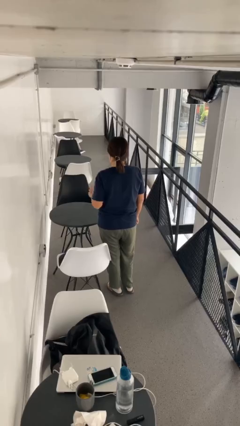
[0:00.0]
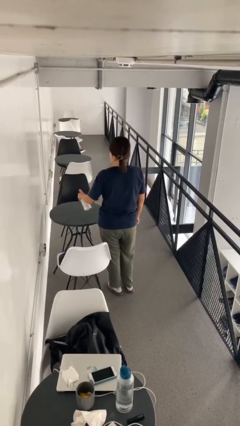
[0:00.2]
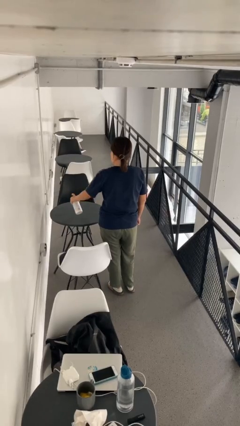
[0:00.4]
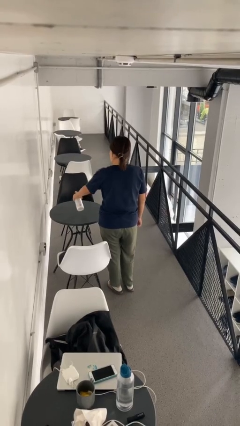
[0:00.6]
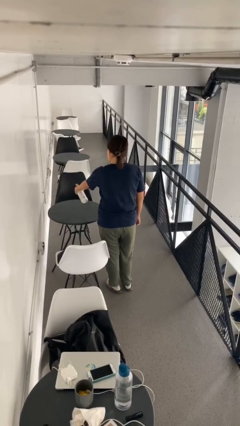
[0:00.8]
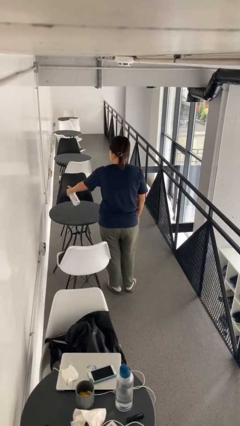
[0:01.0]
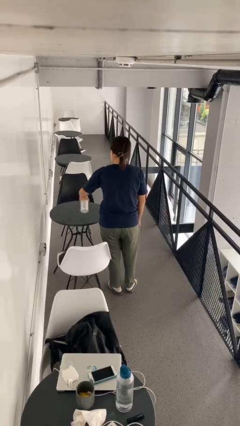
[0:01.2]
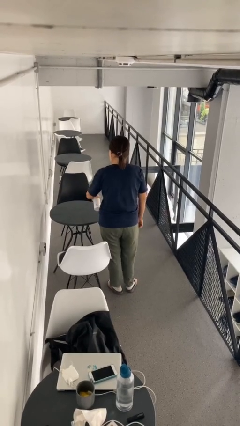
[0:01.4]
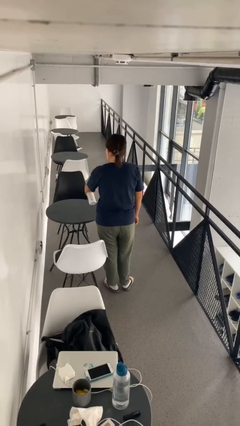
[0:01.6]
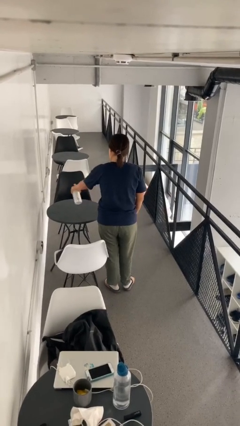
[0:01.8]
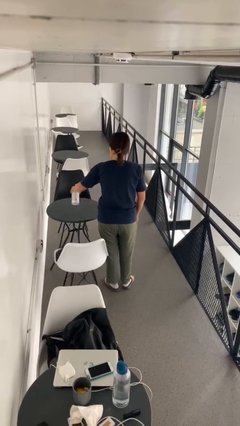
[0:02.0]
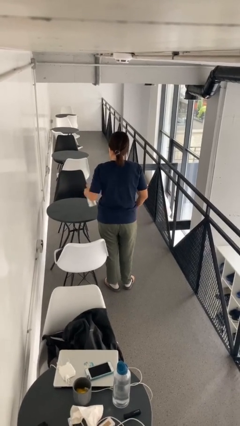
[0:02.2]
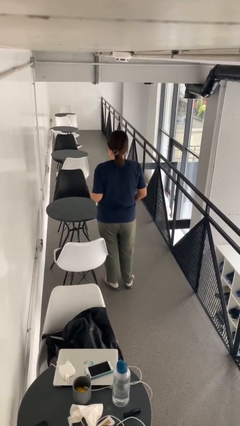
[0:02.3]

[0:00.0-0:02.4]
person sprays from bottle

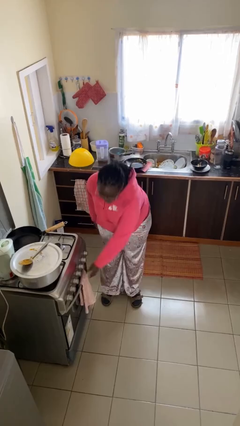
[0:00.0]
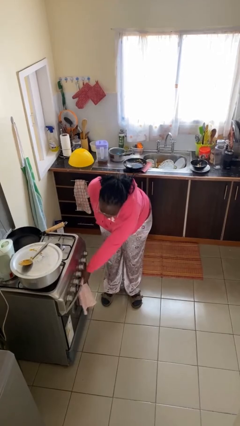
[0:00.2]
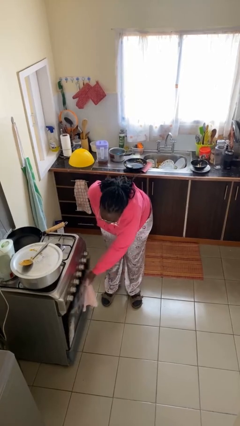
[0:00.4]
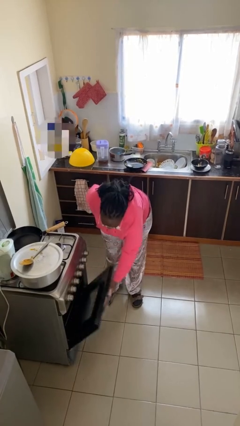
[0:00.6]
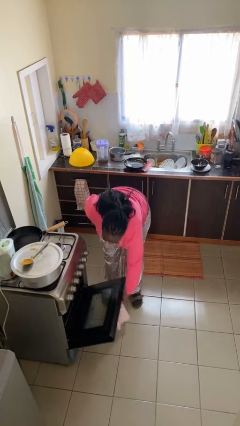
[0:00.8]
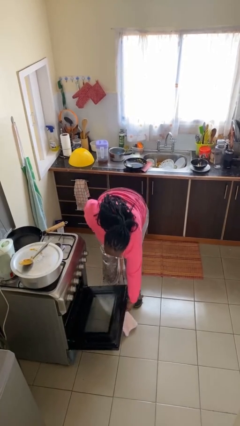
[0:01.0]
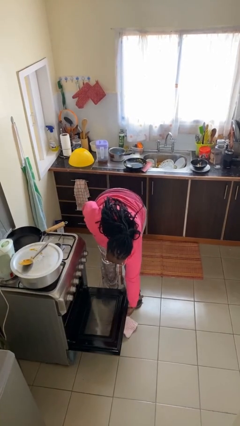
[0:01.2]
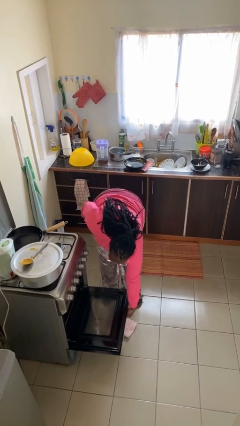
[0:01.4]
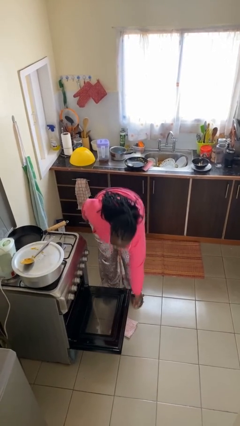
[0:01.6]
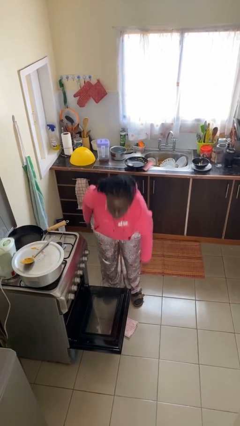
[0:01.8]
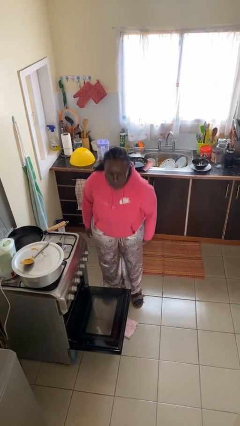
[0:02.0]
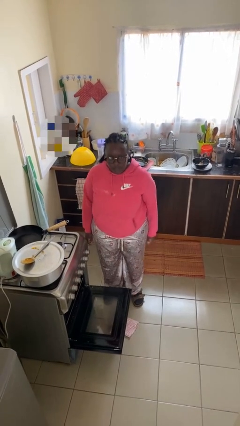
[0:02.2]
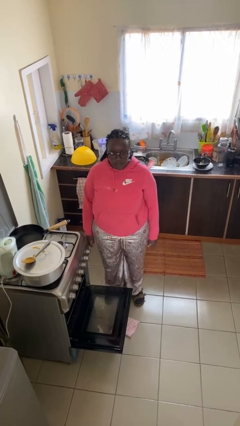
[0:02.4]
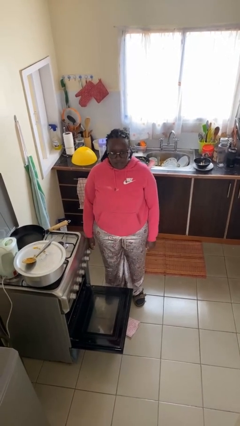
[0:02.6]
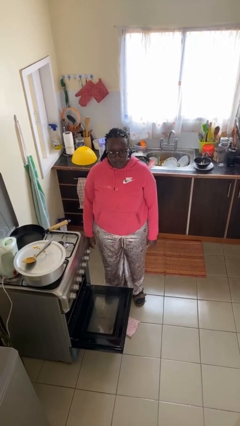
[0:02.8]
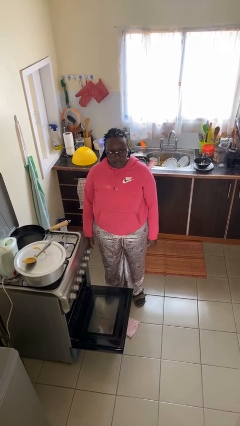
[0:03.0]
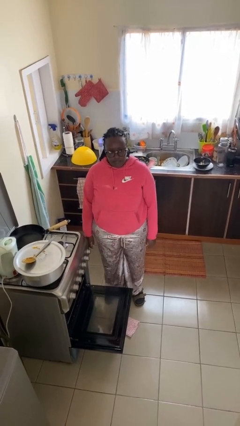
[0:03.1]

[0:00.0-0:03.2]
person opens oven door

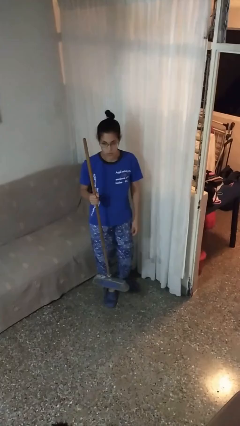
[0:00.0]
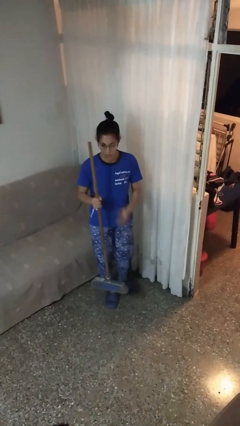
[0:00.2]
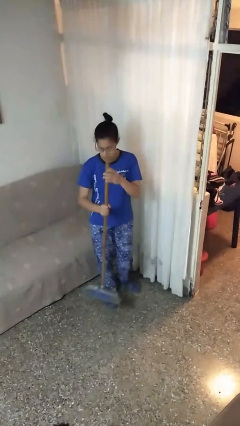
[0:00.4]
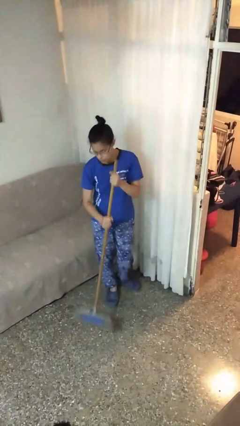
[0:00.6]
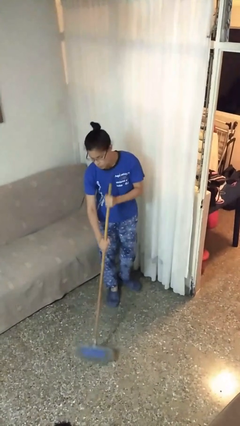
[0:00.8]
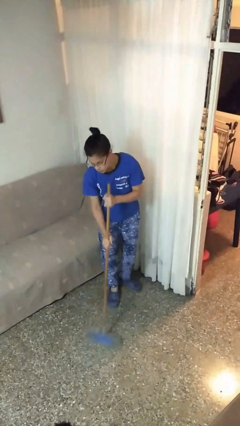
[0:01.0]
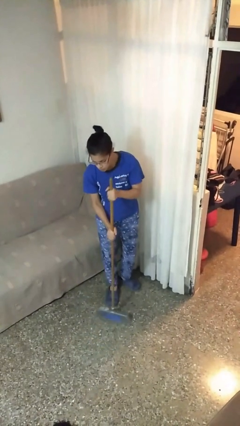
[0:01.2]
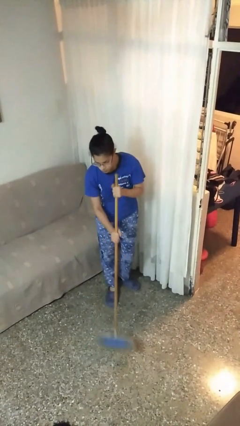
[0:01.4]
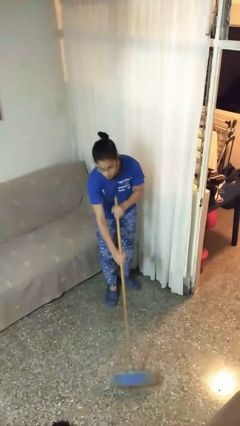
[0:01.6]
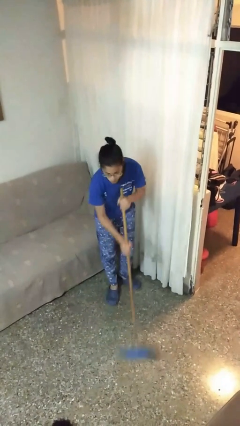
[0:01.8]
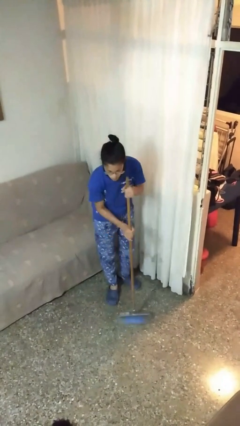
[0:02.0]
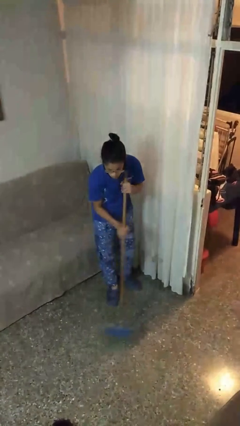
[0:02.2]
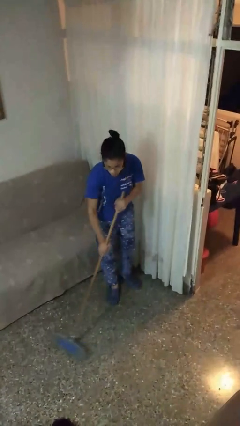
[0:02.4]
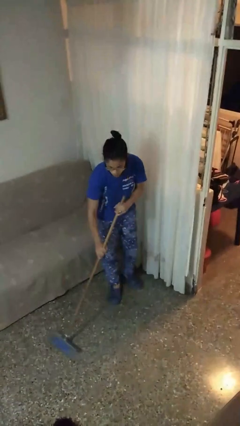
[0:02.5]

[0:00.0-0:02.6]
person sweeps floor

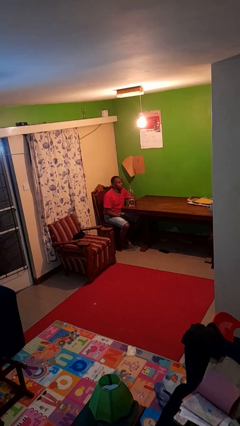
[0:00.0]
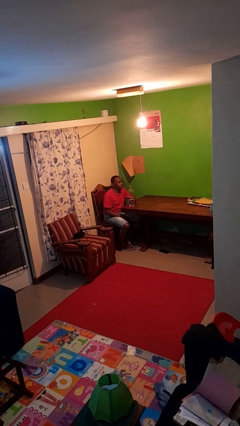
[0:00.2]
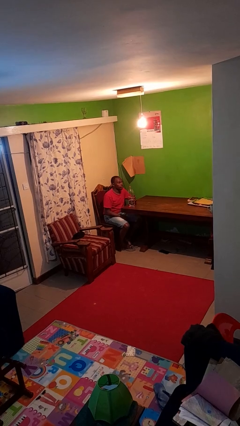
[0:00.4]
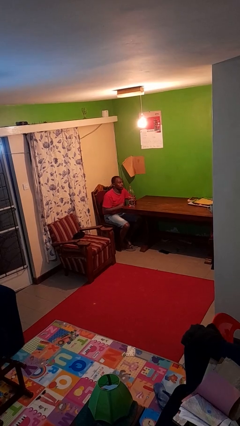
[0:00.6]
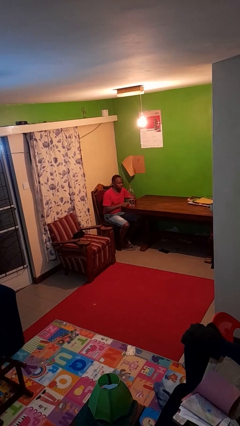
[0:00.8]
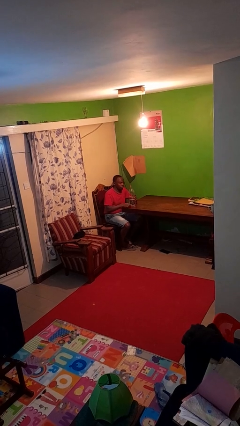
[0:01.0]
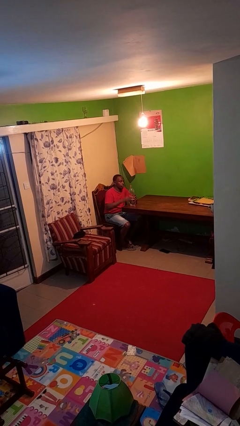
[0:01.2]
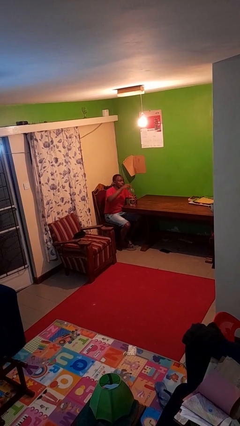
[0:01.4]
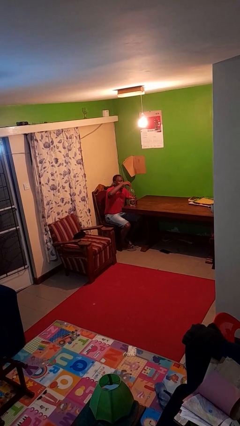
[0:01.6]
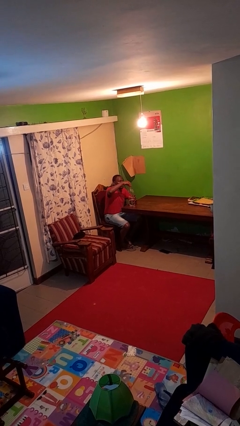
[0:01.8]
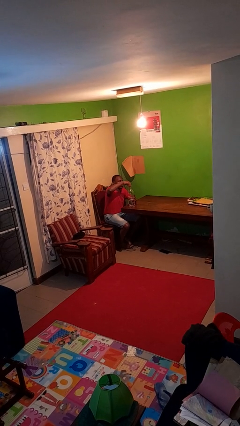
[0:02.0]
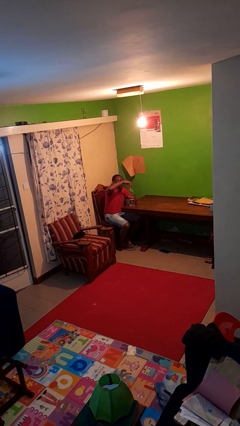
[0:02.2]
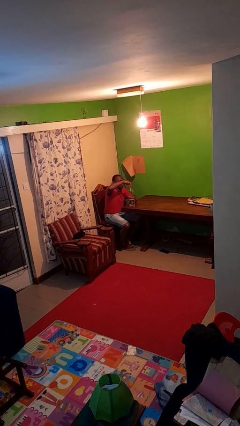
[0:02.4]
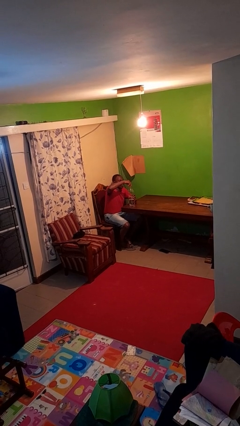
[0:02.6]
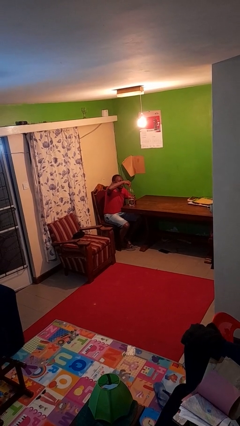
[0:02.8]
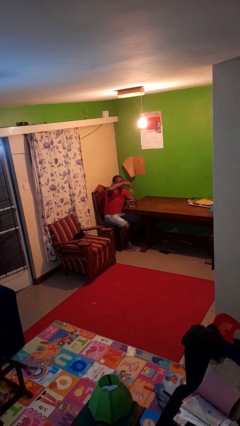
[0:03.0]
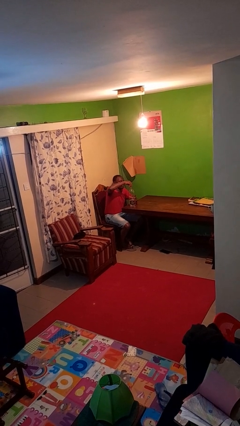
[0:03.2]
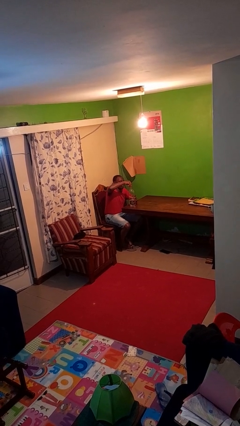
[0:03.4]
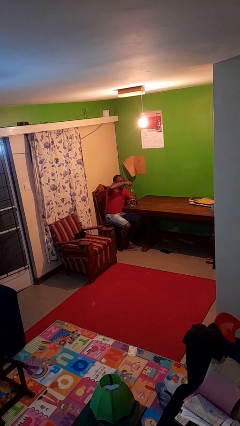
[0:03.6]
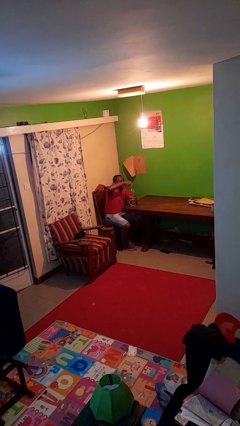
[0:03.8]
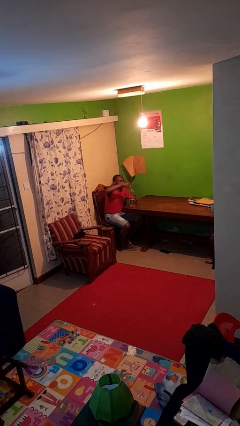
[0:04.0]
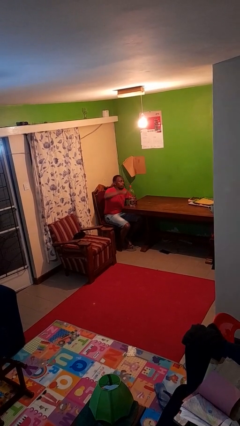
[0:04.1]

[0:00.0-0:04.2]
person screws lid to bottle

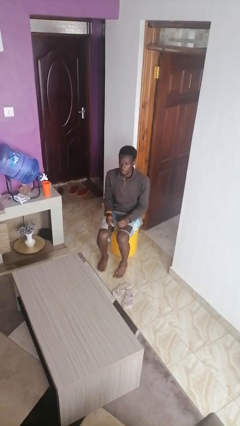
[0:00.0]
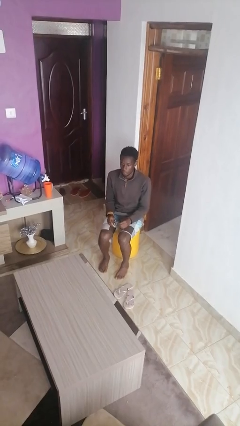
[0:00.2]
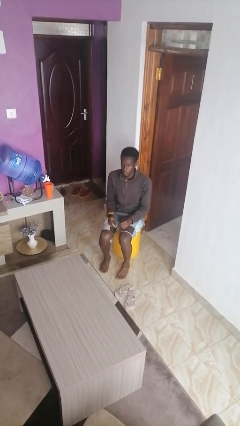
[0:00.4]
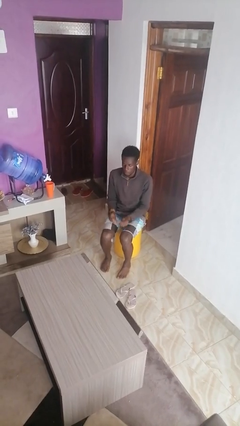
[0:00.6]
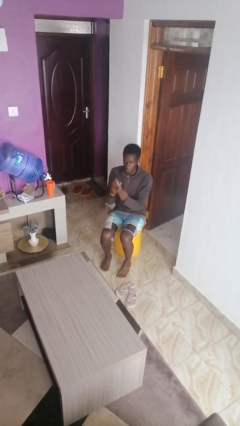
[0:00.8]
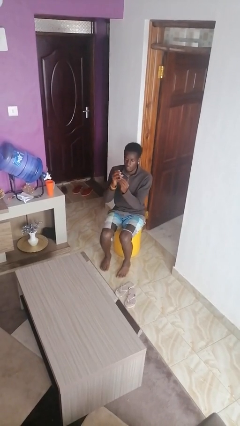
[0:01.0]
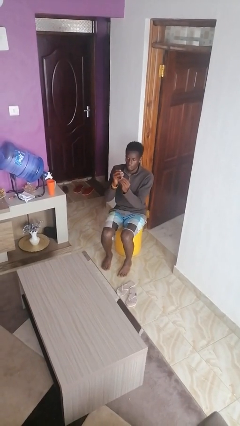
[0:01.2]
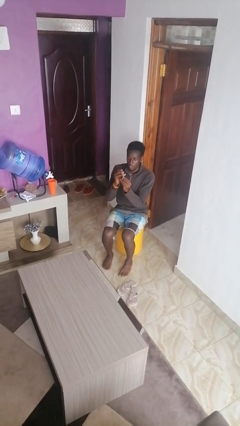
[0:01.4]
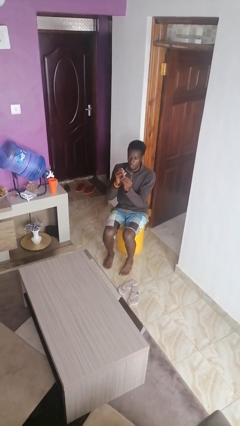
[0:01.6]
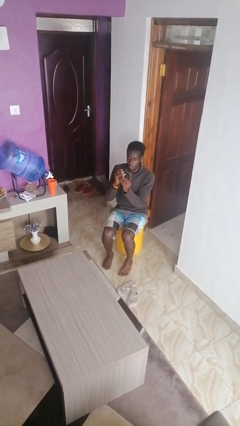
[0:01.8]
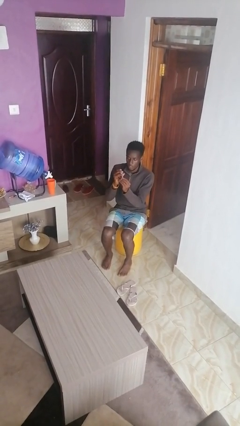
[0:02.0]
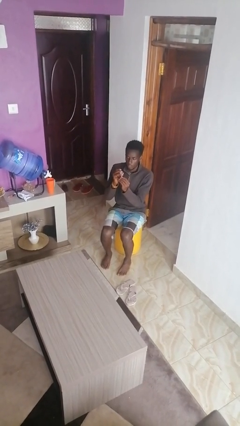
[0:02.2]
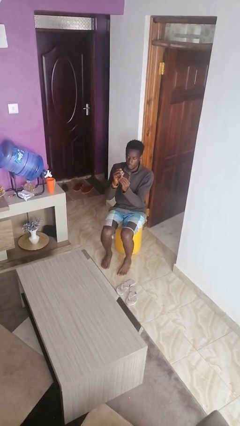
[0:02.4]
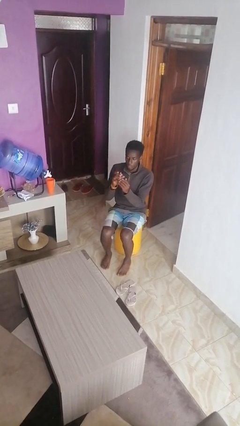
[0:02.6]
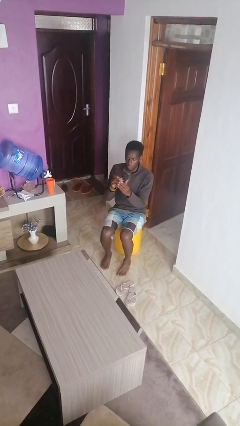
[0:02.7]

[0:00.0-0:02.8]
person clips fingernails

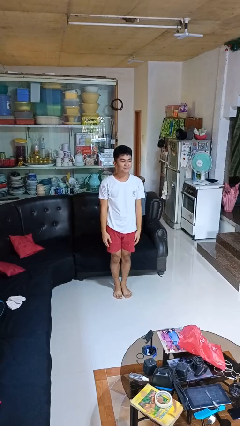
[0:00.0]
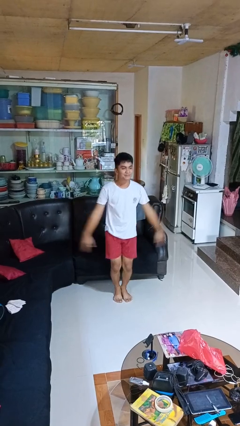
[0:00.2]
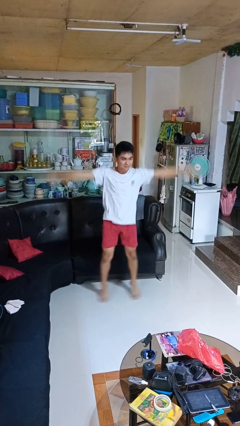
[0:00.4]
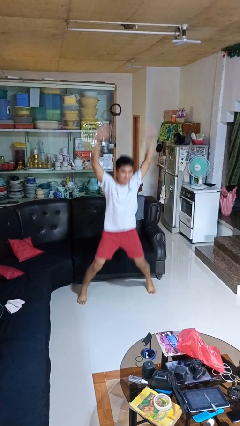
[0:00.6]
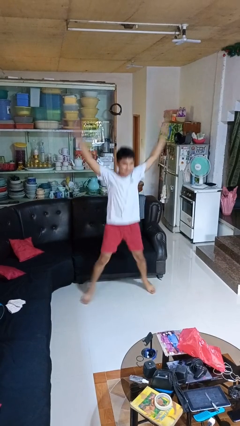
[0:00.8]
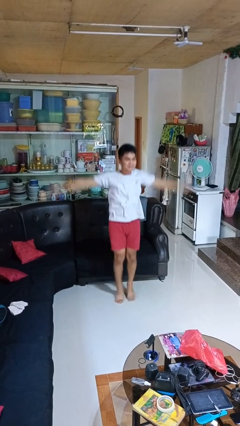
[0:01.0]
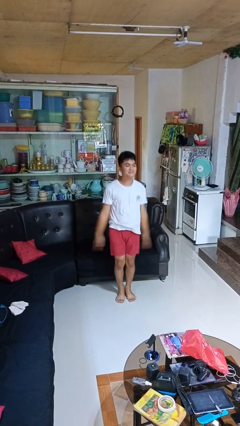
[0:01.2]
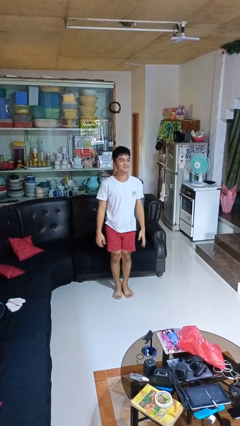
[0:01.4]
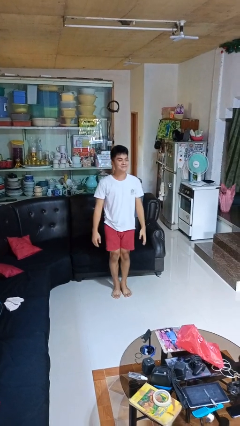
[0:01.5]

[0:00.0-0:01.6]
person exercises with jumping jacks

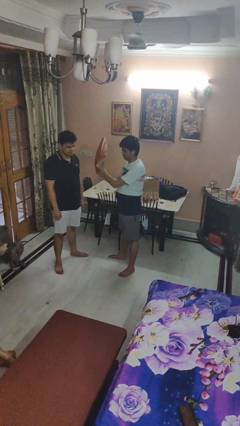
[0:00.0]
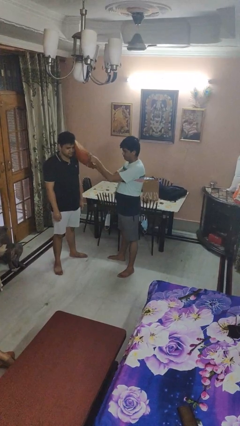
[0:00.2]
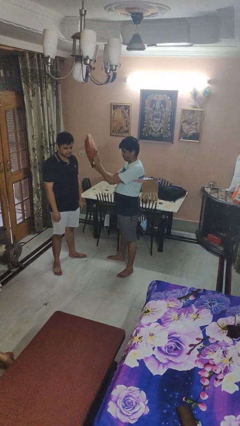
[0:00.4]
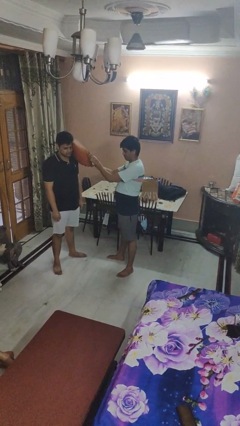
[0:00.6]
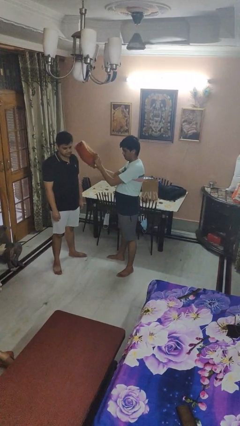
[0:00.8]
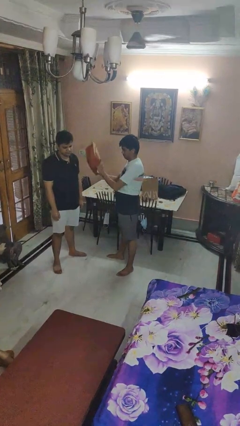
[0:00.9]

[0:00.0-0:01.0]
person hits person with pillow
